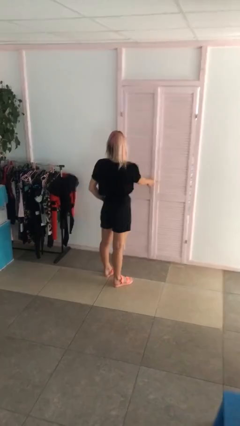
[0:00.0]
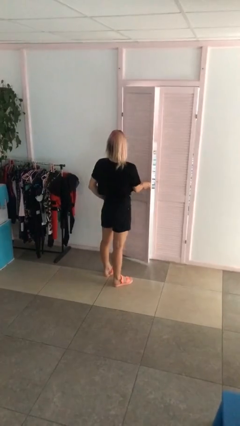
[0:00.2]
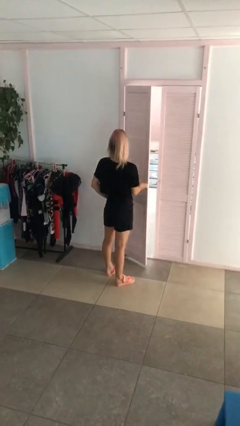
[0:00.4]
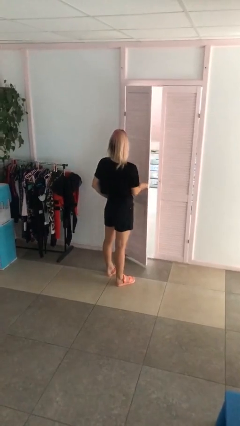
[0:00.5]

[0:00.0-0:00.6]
person opens facility door

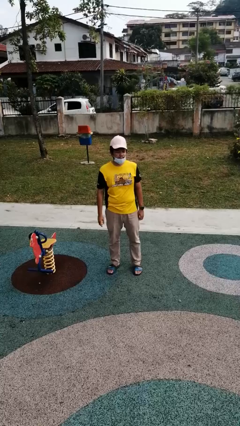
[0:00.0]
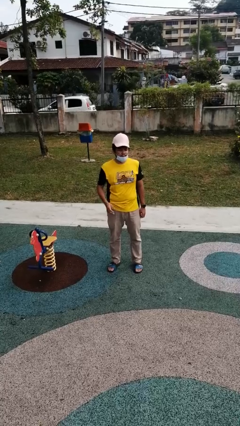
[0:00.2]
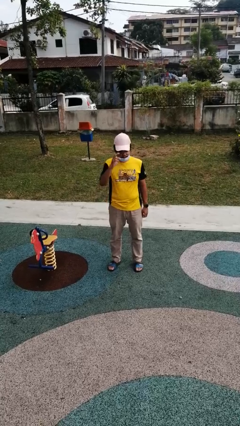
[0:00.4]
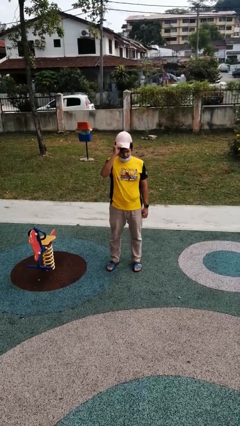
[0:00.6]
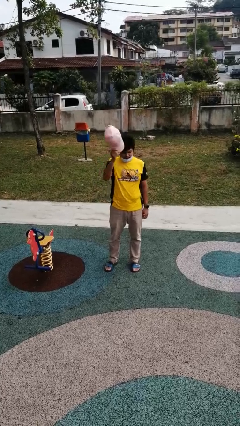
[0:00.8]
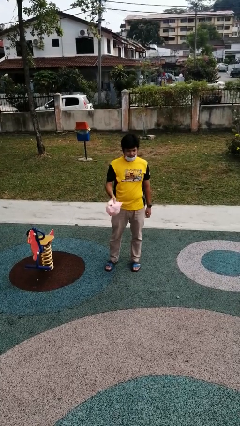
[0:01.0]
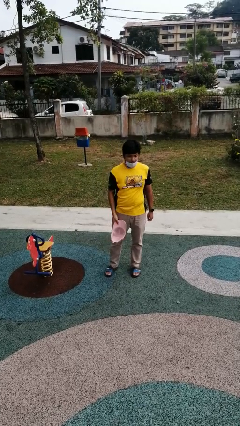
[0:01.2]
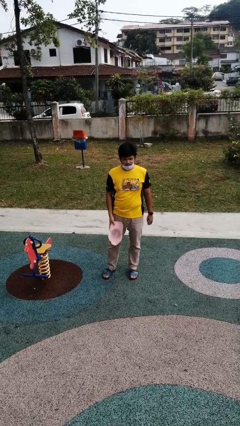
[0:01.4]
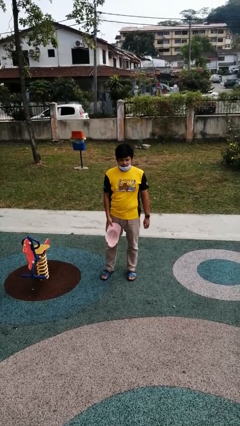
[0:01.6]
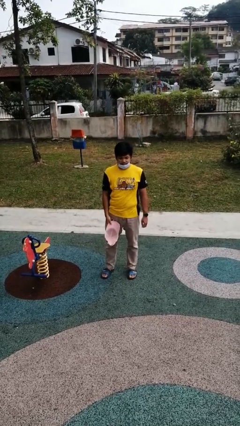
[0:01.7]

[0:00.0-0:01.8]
person takes off hat

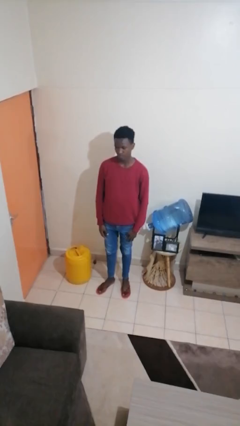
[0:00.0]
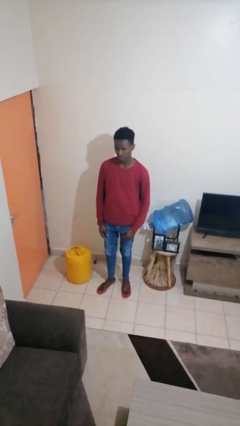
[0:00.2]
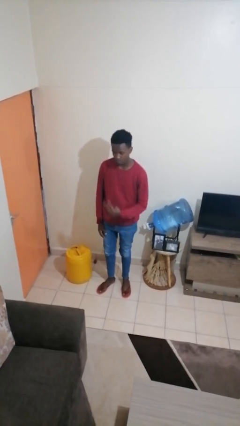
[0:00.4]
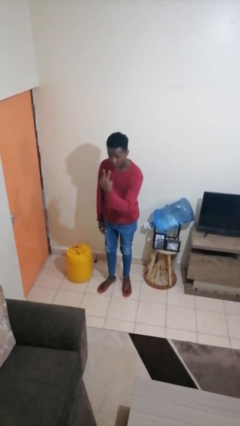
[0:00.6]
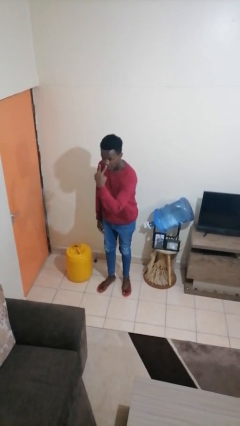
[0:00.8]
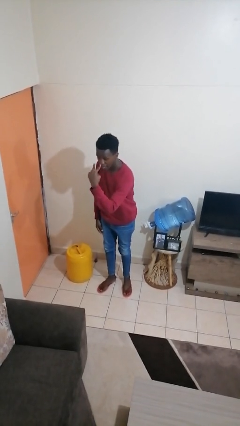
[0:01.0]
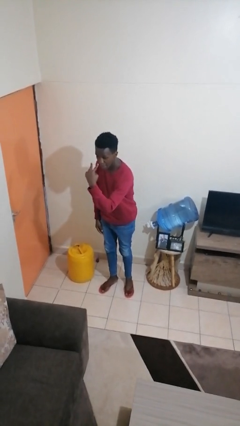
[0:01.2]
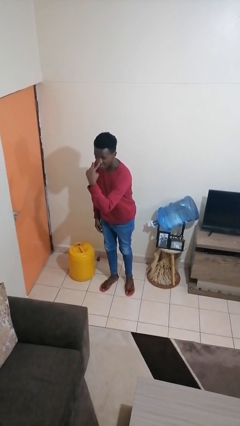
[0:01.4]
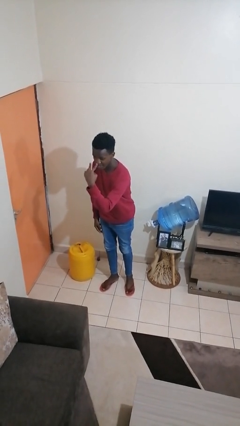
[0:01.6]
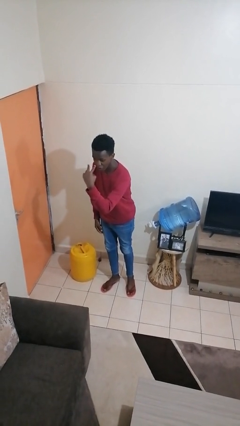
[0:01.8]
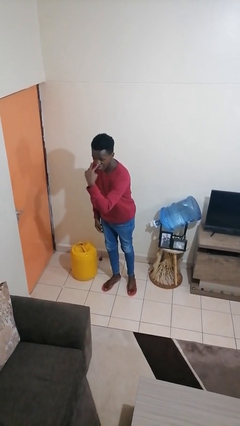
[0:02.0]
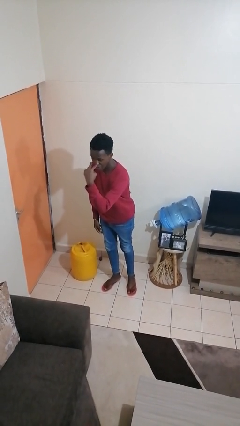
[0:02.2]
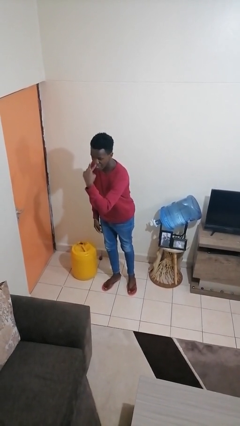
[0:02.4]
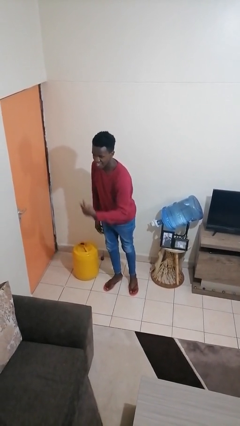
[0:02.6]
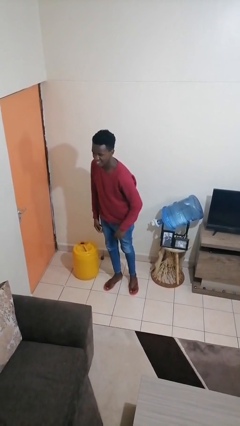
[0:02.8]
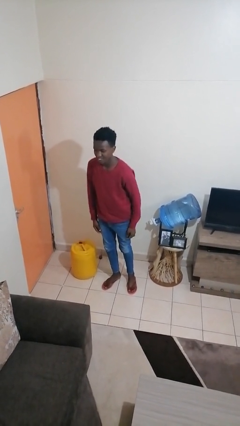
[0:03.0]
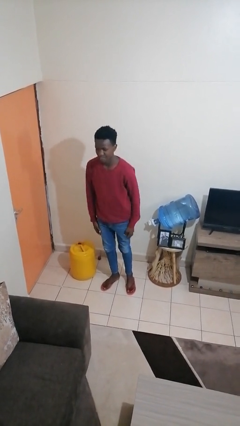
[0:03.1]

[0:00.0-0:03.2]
person gestures watch closely

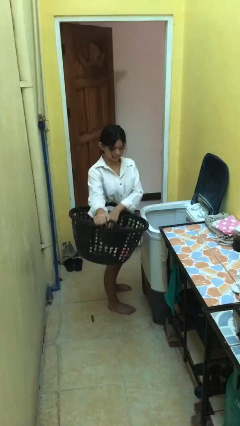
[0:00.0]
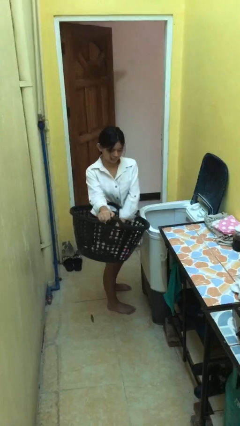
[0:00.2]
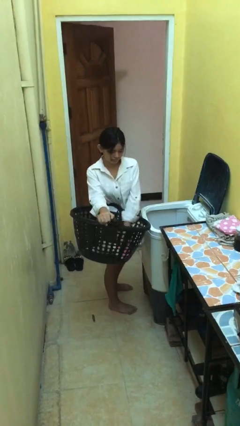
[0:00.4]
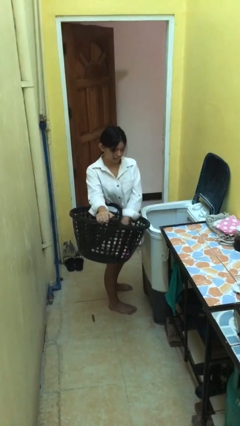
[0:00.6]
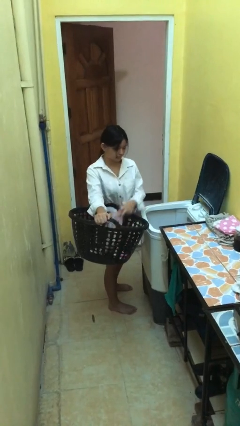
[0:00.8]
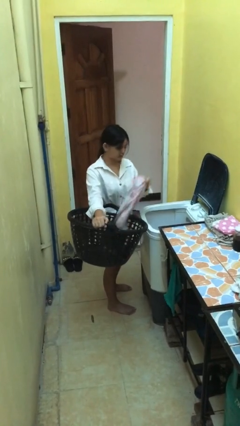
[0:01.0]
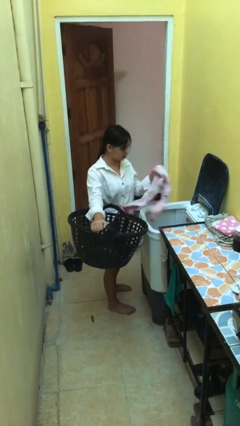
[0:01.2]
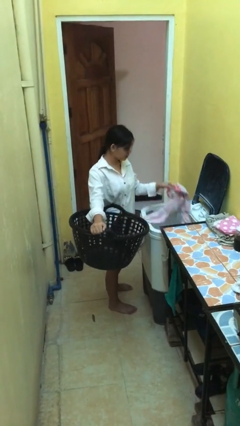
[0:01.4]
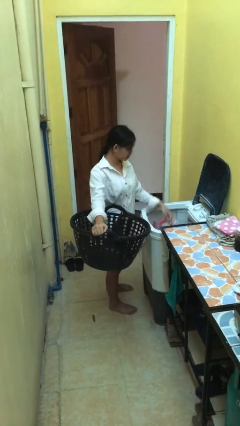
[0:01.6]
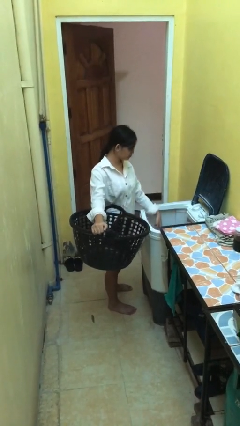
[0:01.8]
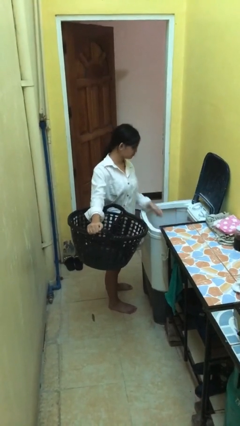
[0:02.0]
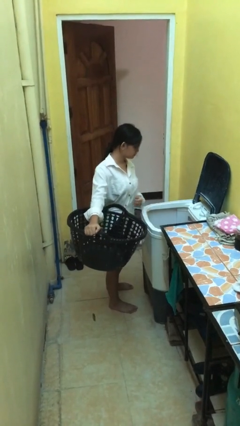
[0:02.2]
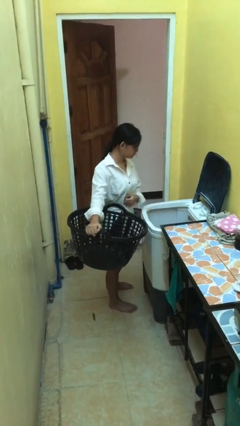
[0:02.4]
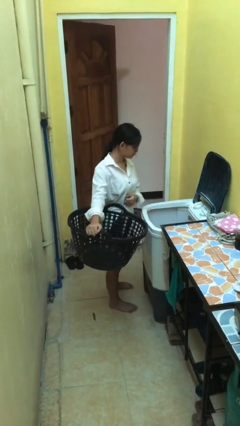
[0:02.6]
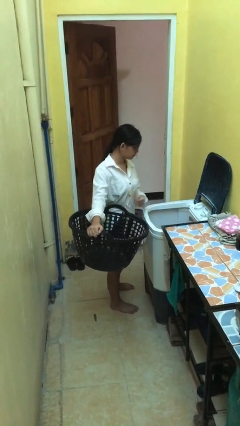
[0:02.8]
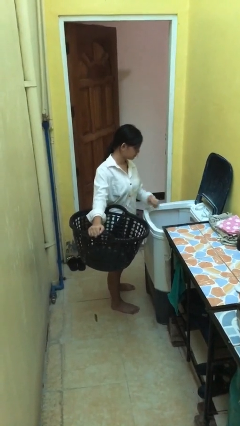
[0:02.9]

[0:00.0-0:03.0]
person loads clotheswasher

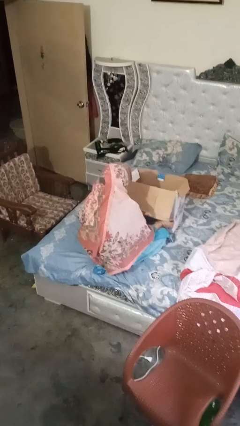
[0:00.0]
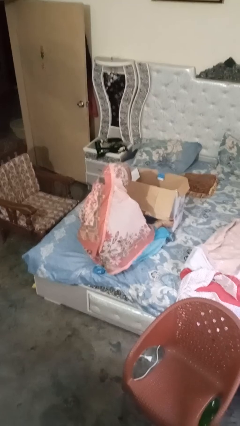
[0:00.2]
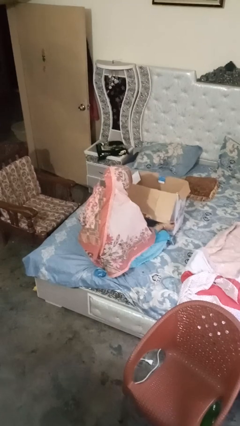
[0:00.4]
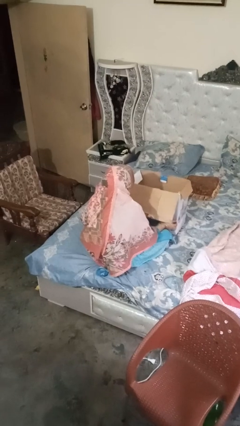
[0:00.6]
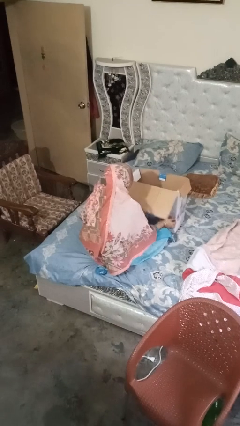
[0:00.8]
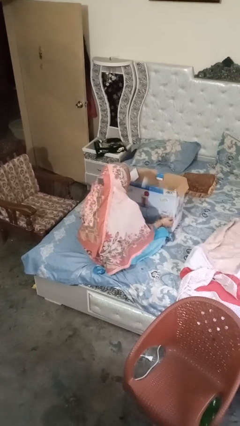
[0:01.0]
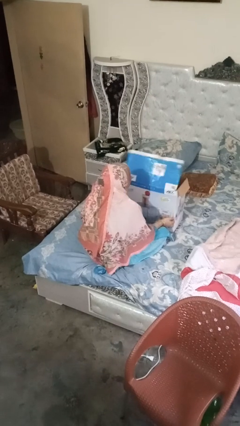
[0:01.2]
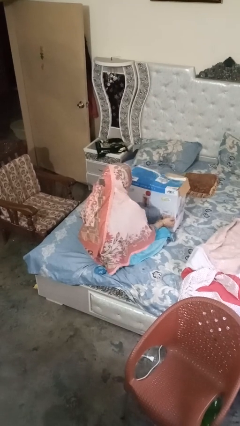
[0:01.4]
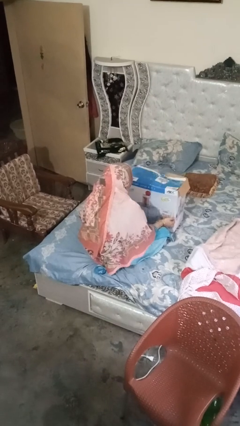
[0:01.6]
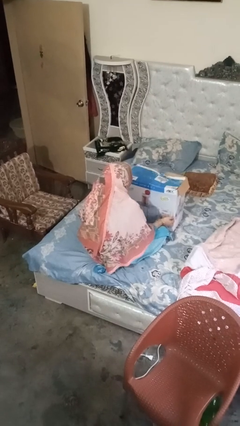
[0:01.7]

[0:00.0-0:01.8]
person closes box

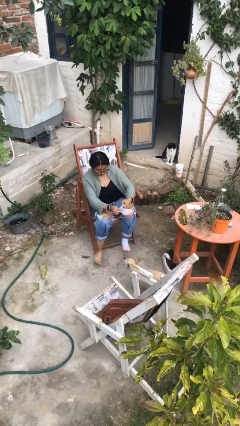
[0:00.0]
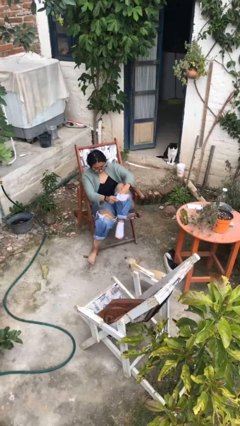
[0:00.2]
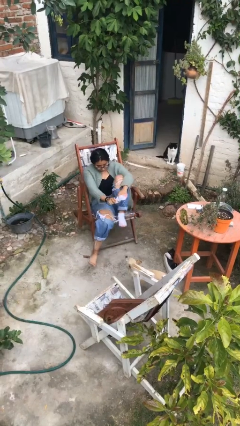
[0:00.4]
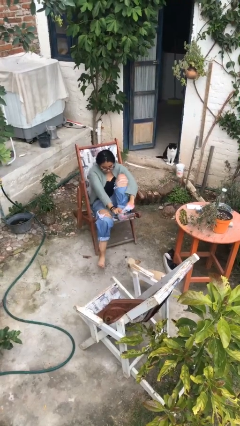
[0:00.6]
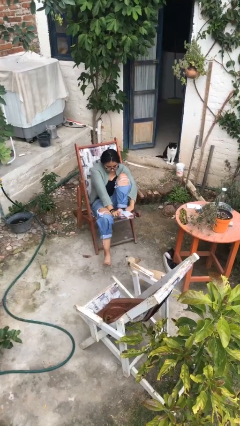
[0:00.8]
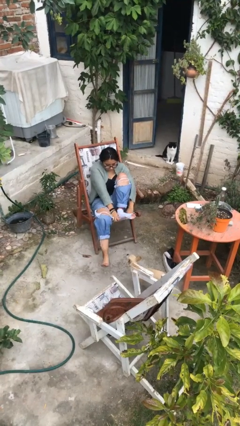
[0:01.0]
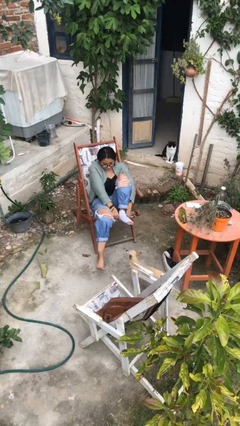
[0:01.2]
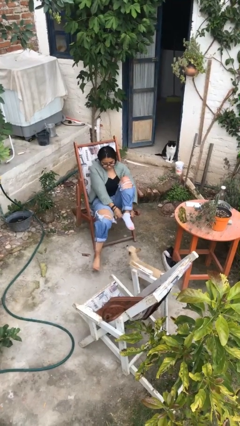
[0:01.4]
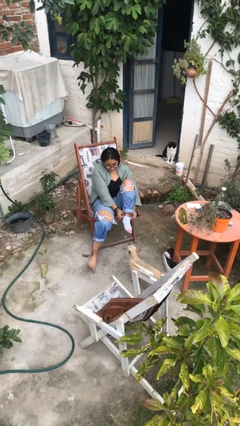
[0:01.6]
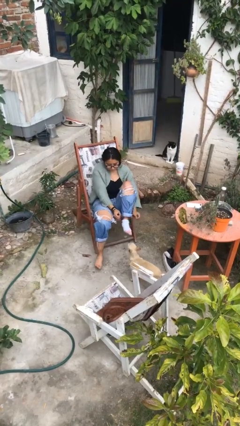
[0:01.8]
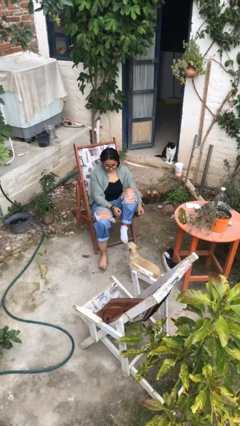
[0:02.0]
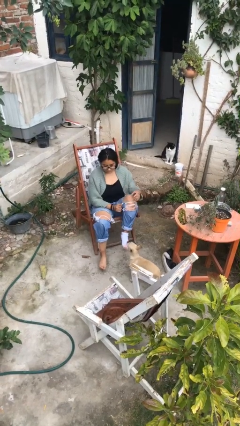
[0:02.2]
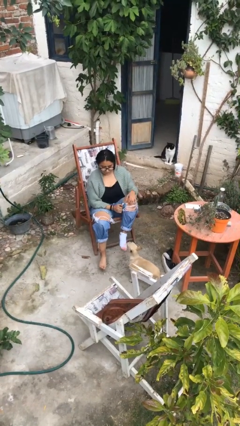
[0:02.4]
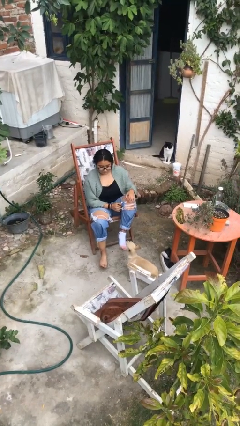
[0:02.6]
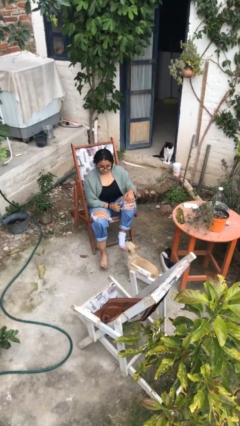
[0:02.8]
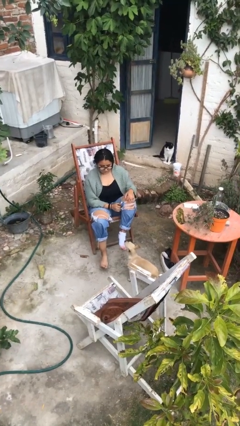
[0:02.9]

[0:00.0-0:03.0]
person puts on socks

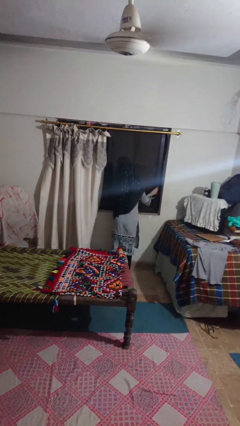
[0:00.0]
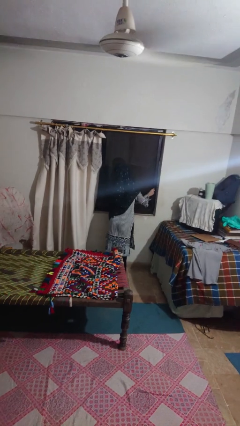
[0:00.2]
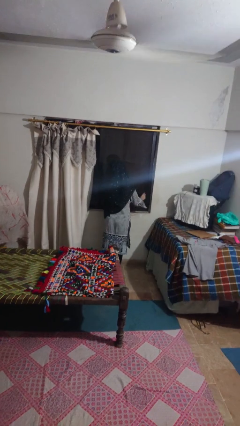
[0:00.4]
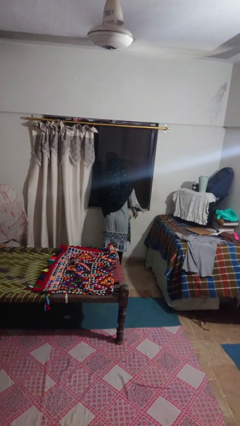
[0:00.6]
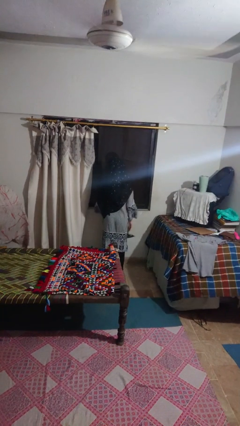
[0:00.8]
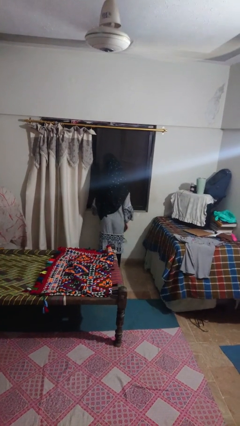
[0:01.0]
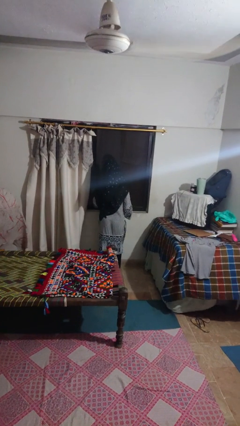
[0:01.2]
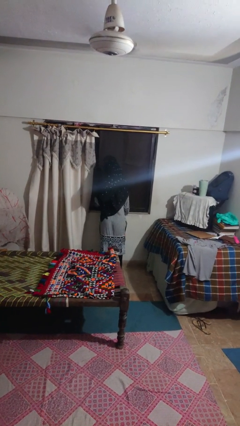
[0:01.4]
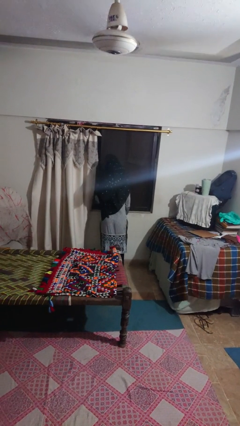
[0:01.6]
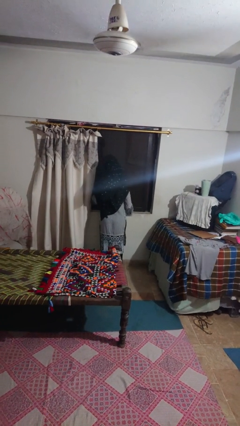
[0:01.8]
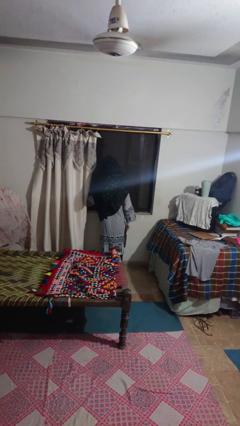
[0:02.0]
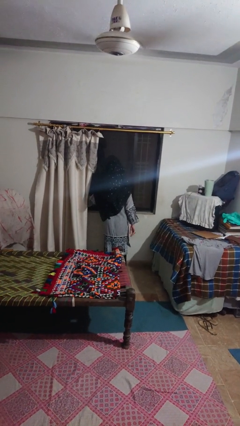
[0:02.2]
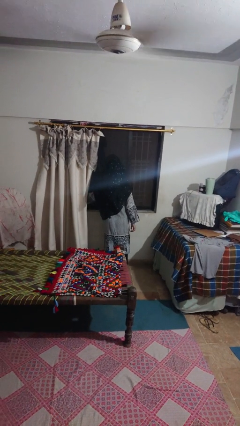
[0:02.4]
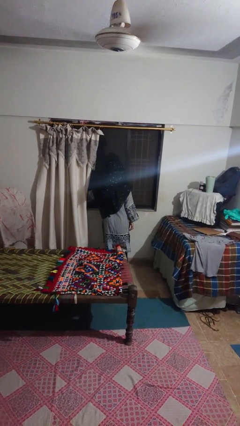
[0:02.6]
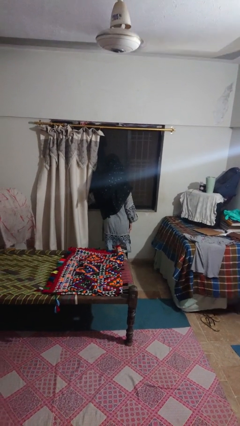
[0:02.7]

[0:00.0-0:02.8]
person opens home window

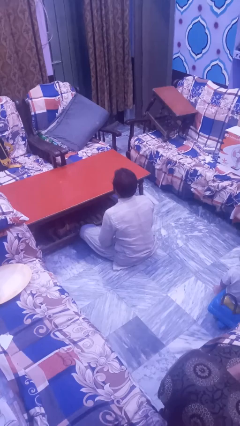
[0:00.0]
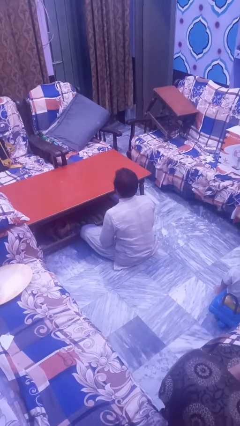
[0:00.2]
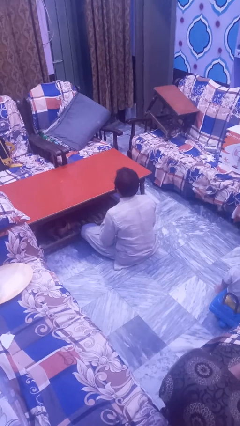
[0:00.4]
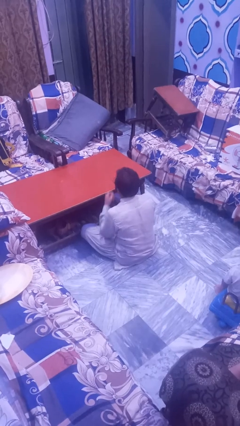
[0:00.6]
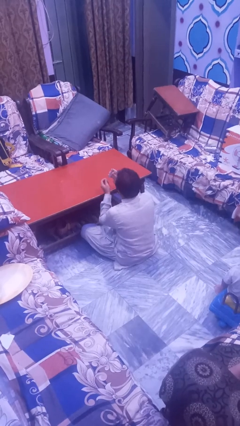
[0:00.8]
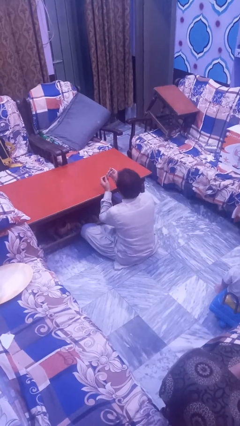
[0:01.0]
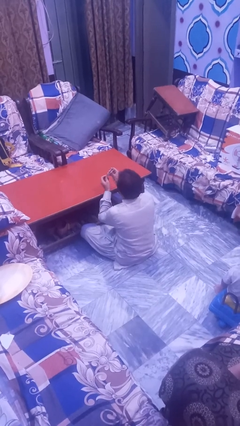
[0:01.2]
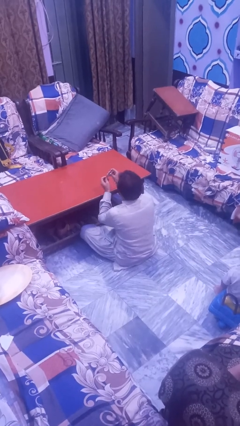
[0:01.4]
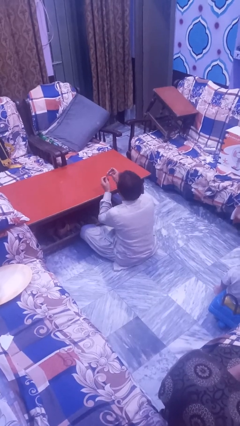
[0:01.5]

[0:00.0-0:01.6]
person clips fingernails
